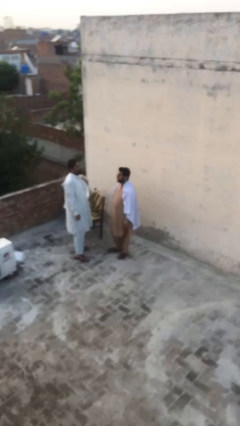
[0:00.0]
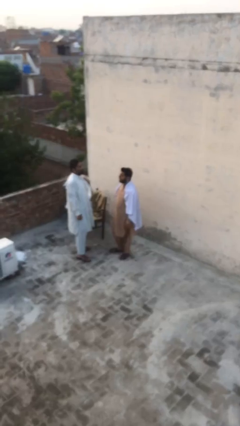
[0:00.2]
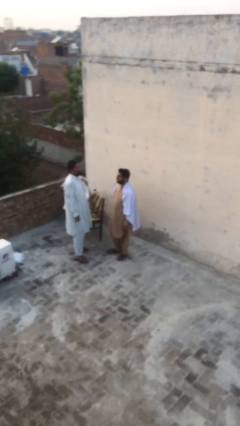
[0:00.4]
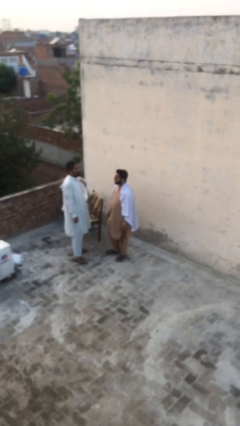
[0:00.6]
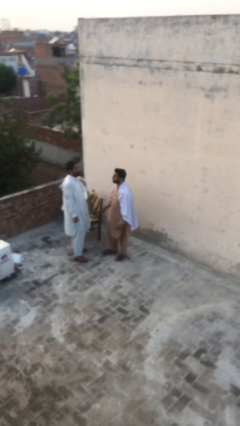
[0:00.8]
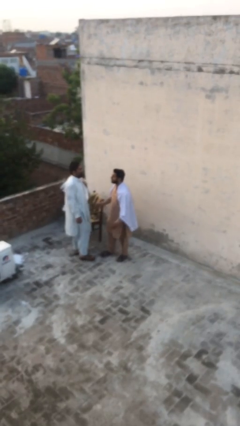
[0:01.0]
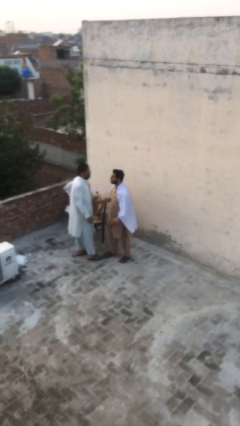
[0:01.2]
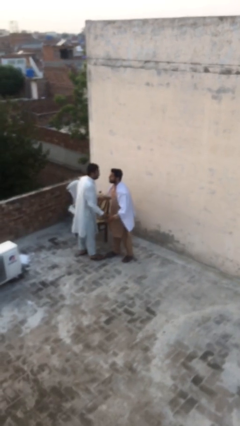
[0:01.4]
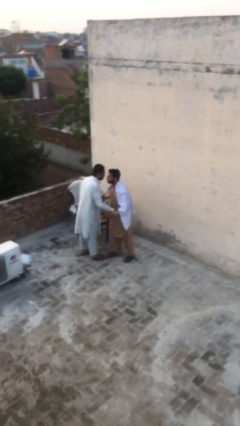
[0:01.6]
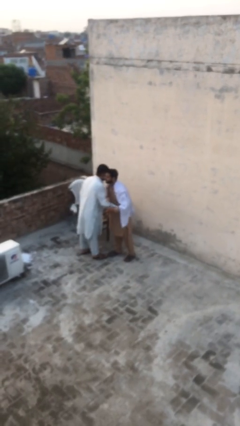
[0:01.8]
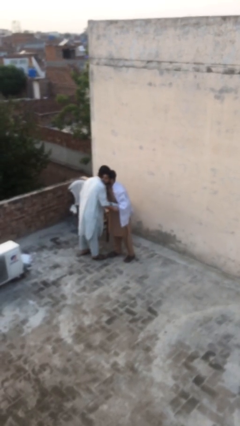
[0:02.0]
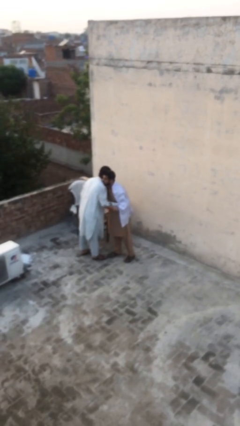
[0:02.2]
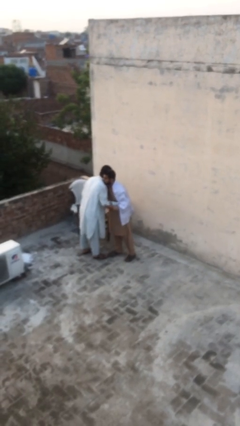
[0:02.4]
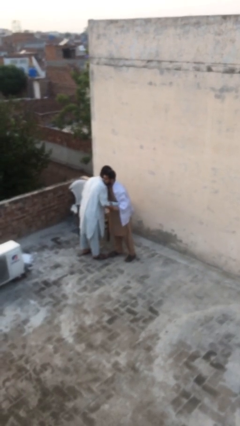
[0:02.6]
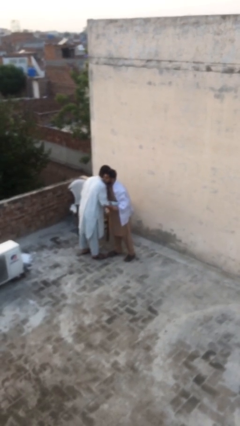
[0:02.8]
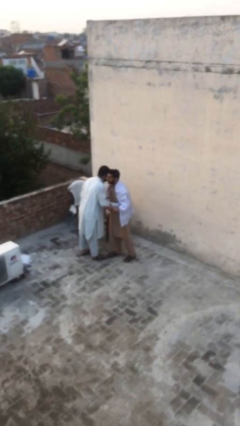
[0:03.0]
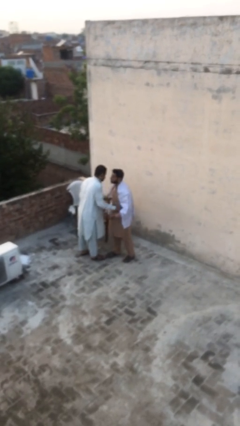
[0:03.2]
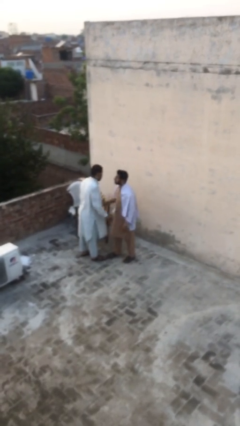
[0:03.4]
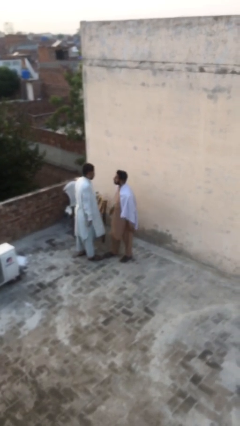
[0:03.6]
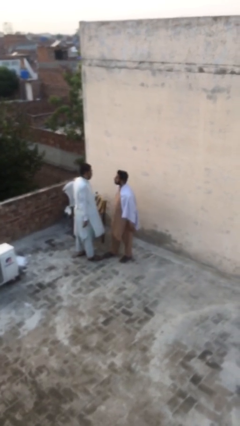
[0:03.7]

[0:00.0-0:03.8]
person embraces person

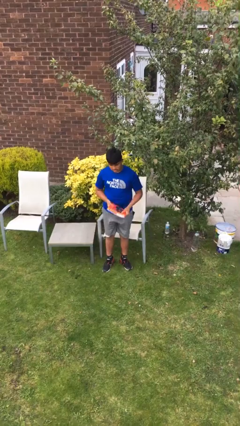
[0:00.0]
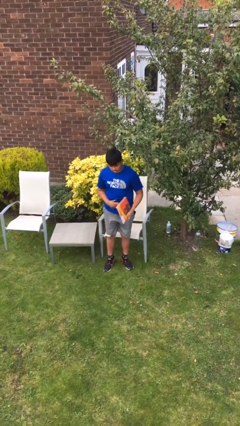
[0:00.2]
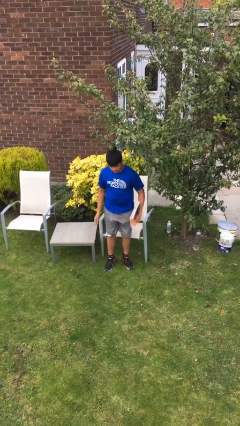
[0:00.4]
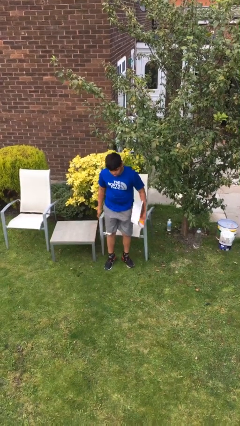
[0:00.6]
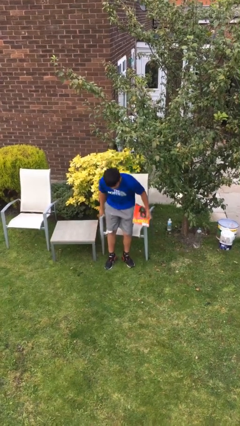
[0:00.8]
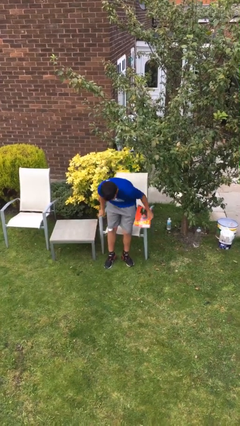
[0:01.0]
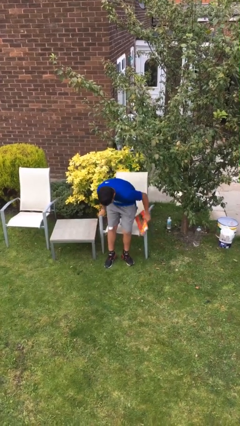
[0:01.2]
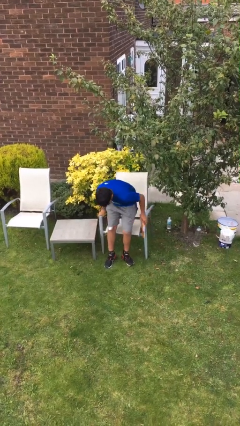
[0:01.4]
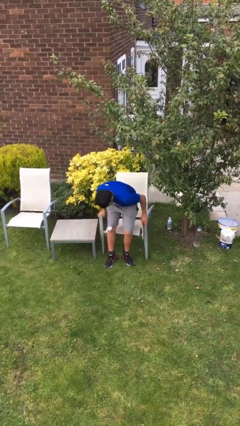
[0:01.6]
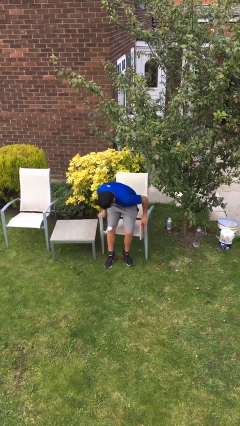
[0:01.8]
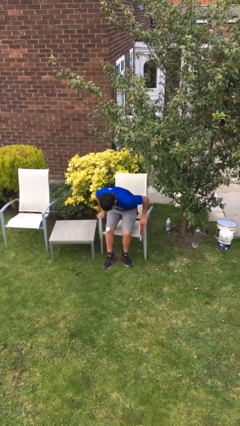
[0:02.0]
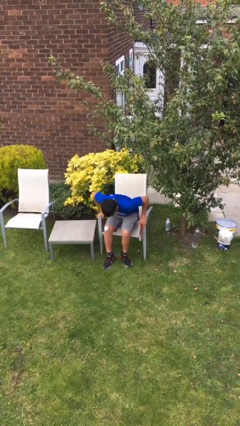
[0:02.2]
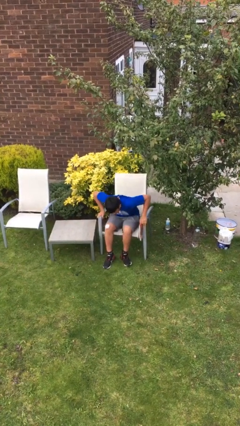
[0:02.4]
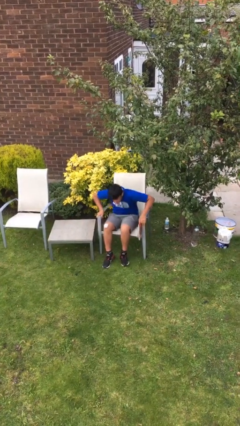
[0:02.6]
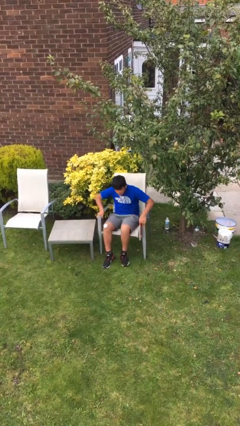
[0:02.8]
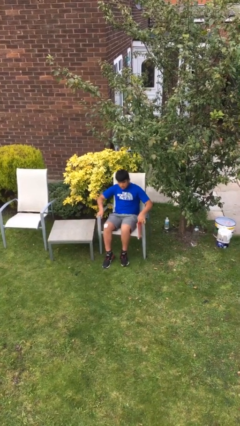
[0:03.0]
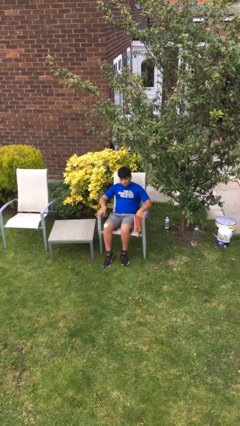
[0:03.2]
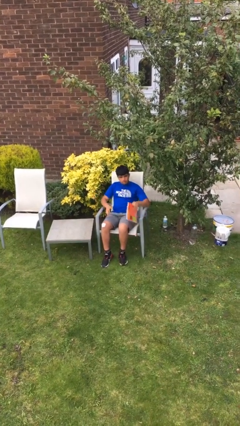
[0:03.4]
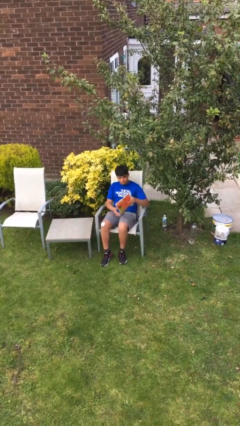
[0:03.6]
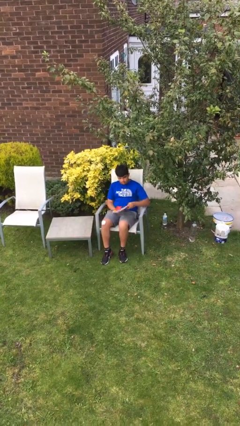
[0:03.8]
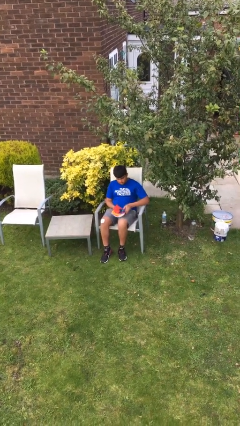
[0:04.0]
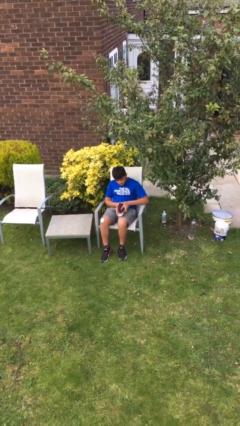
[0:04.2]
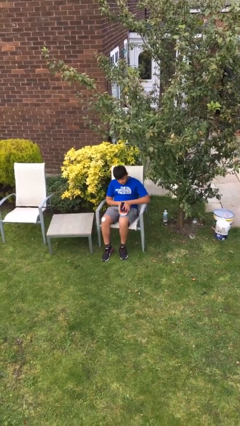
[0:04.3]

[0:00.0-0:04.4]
person sits down

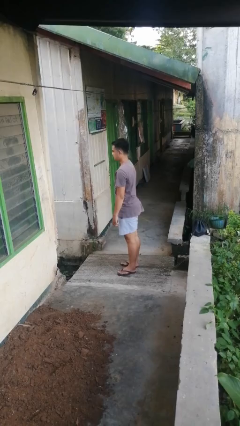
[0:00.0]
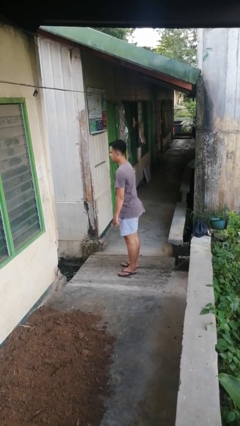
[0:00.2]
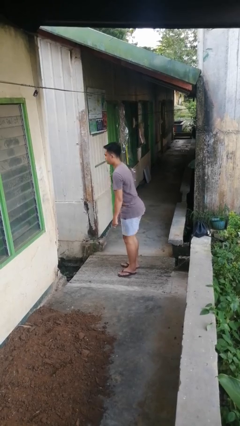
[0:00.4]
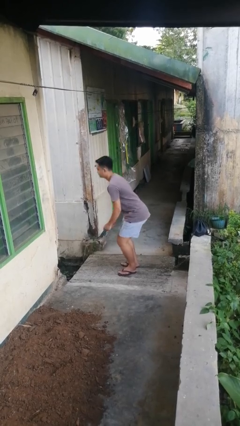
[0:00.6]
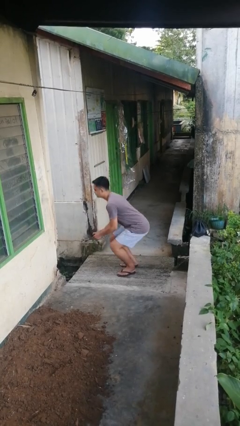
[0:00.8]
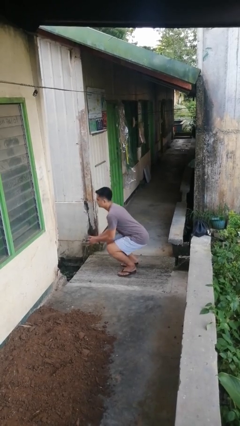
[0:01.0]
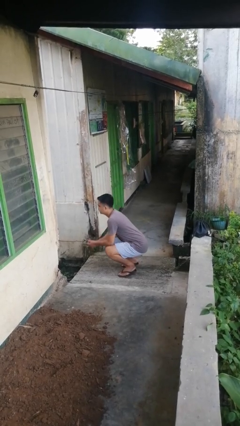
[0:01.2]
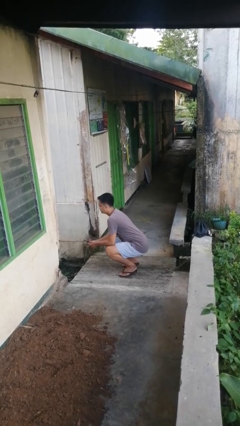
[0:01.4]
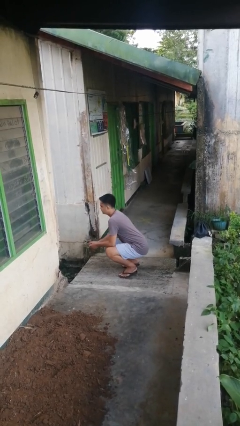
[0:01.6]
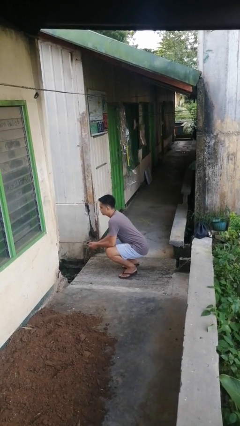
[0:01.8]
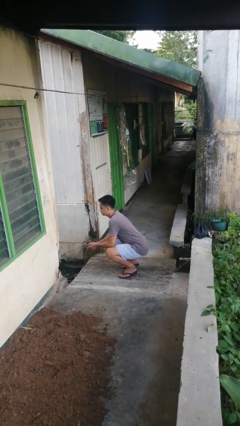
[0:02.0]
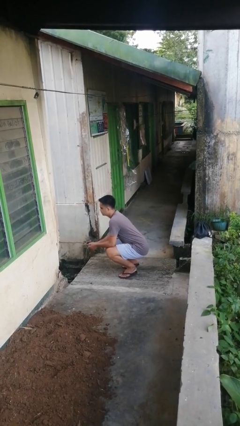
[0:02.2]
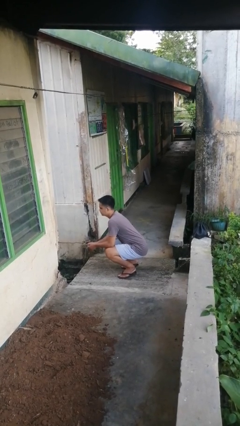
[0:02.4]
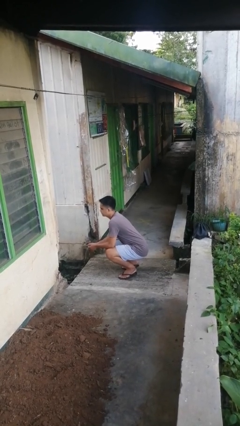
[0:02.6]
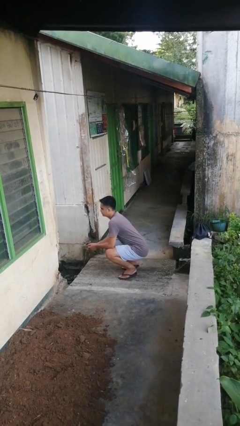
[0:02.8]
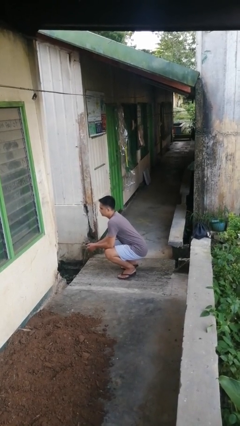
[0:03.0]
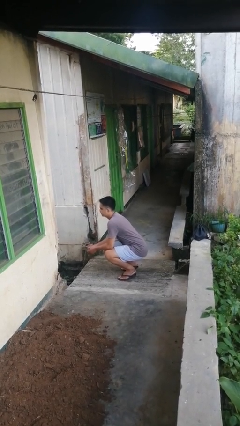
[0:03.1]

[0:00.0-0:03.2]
person squats

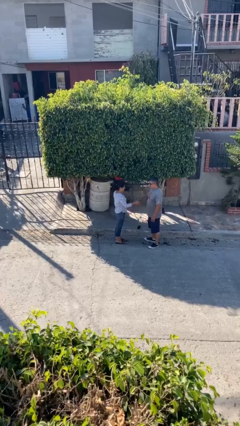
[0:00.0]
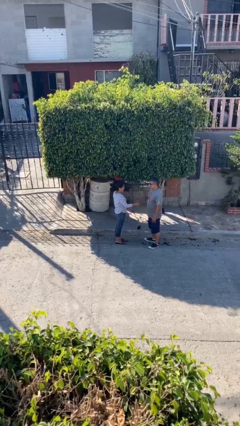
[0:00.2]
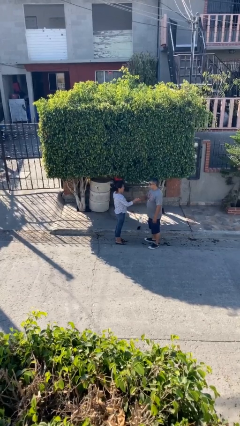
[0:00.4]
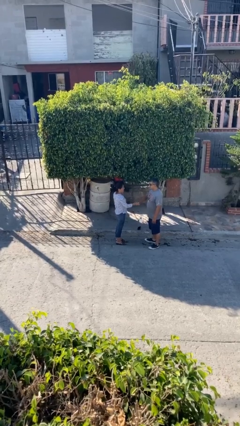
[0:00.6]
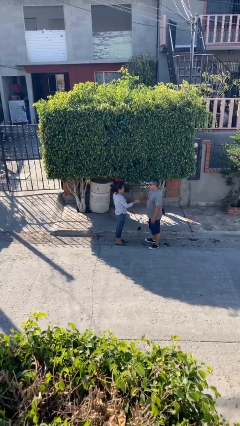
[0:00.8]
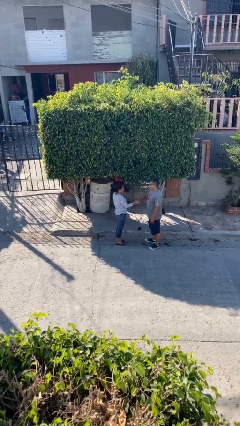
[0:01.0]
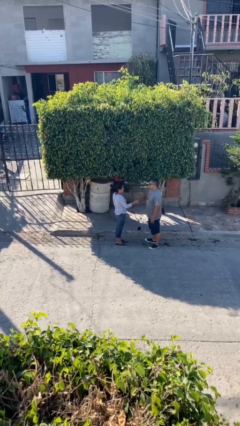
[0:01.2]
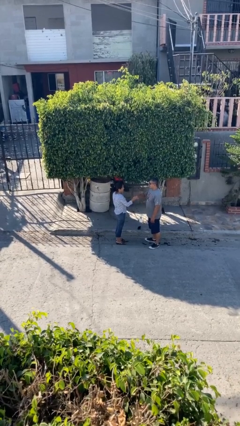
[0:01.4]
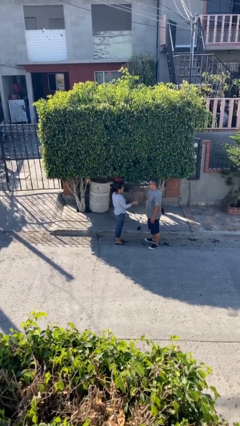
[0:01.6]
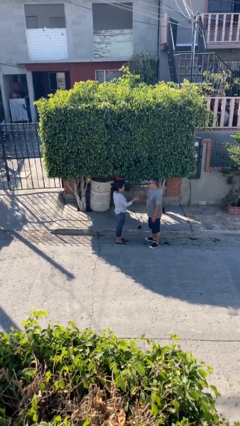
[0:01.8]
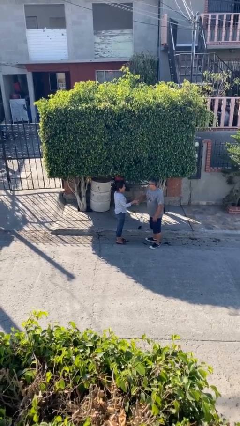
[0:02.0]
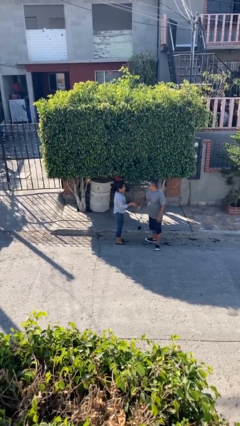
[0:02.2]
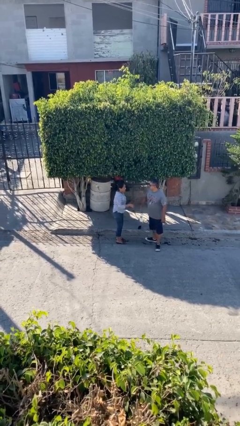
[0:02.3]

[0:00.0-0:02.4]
person shakes hand

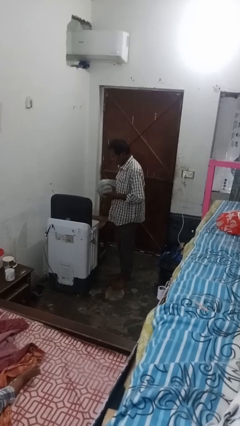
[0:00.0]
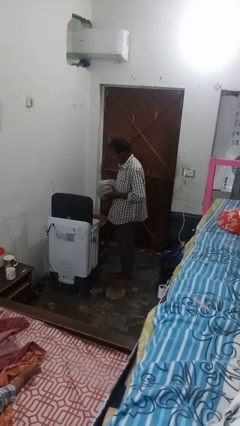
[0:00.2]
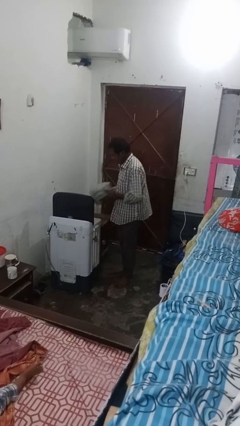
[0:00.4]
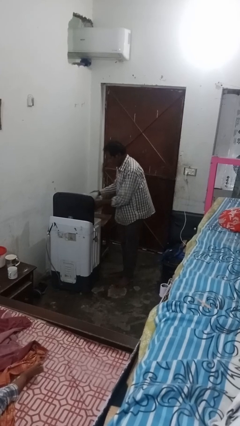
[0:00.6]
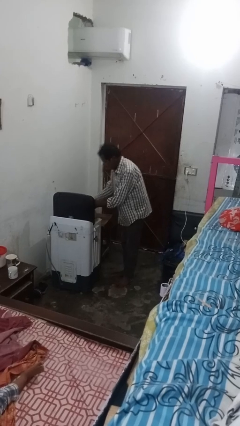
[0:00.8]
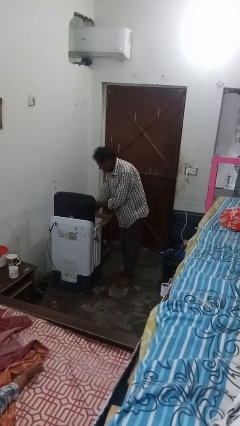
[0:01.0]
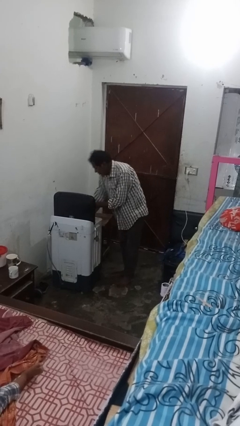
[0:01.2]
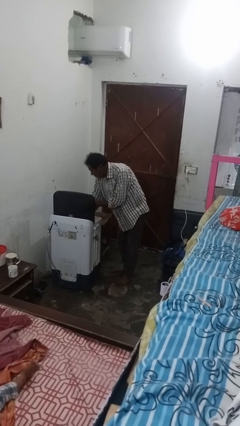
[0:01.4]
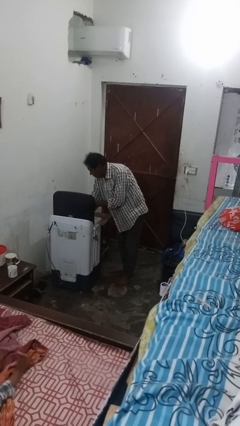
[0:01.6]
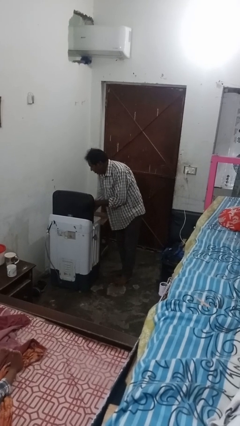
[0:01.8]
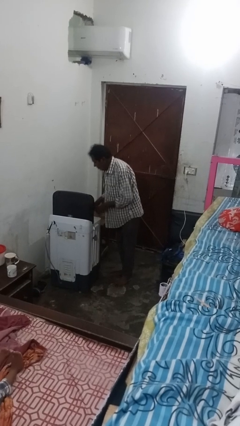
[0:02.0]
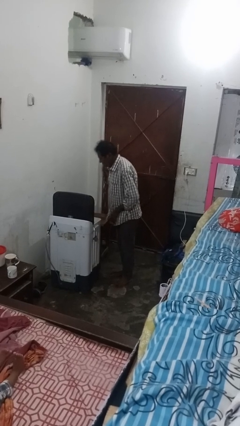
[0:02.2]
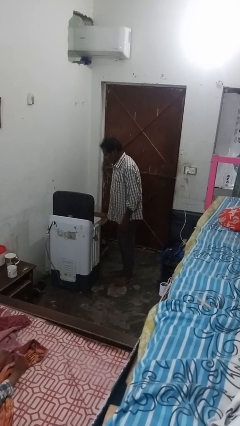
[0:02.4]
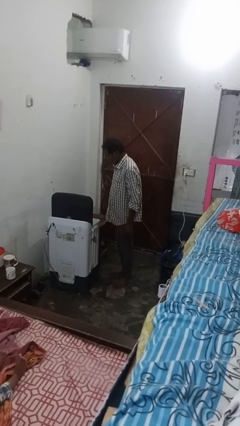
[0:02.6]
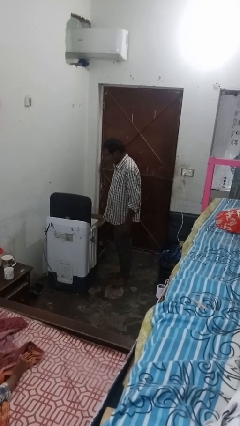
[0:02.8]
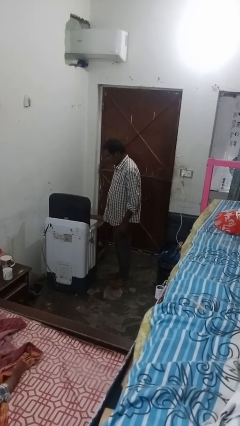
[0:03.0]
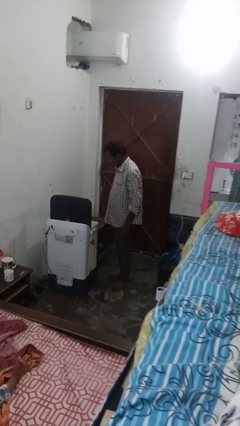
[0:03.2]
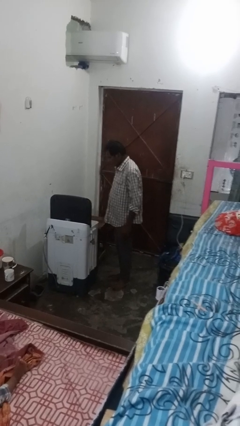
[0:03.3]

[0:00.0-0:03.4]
person loads dryer
